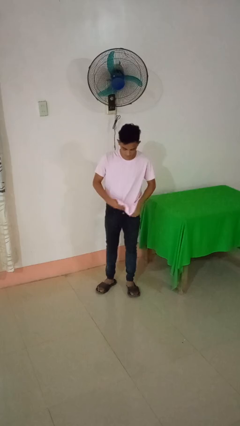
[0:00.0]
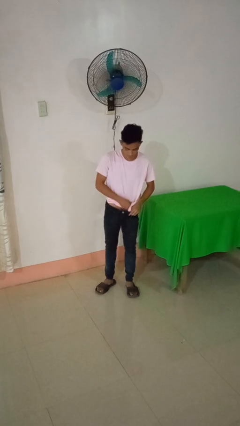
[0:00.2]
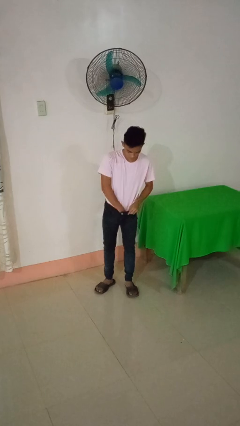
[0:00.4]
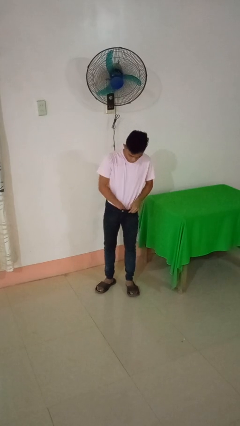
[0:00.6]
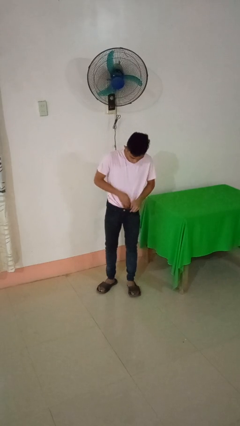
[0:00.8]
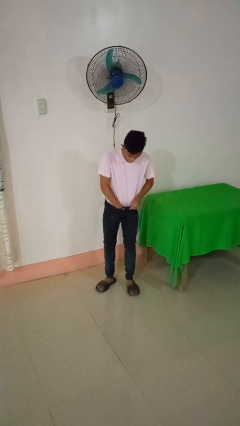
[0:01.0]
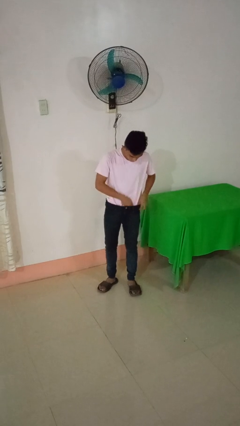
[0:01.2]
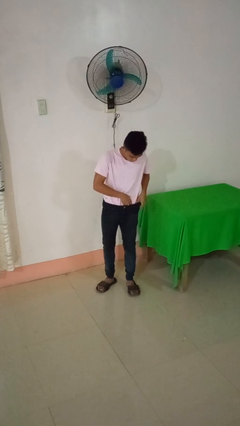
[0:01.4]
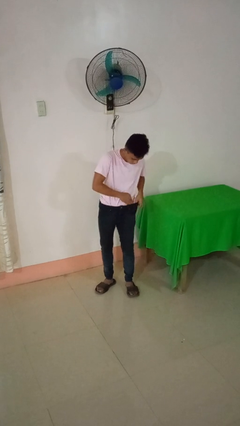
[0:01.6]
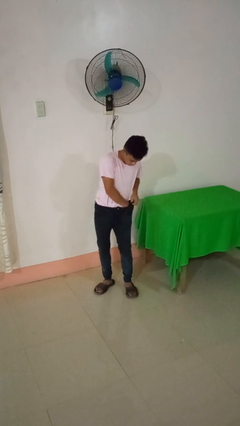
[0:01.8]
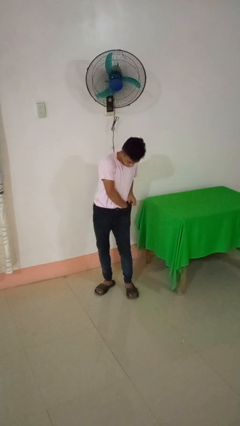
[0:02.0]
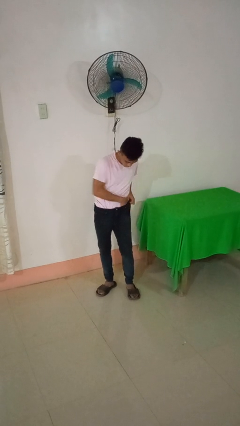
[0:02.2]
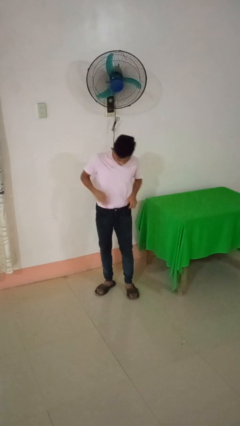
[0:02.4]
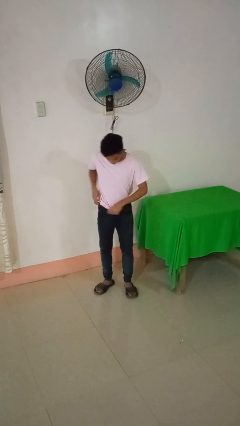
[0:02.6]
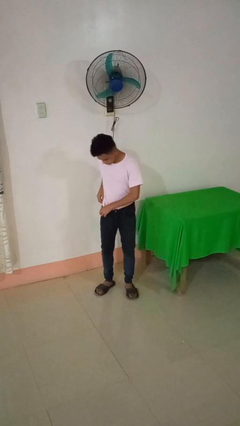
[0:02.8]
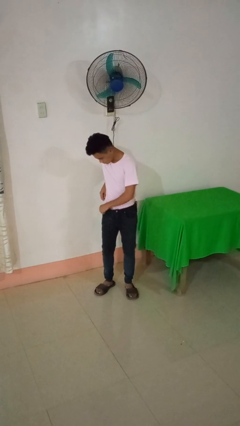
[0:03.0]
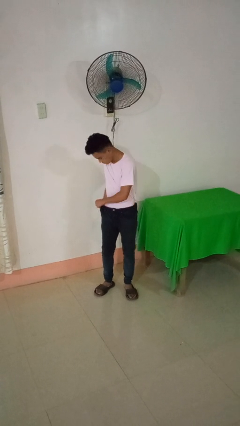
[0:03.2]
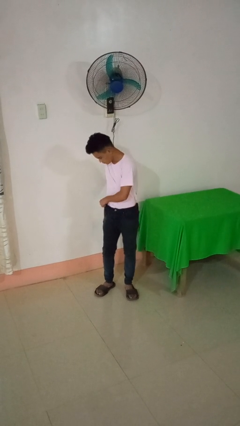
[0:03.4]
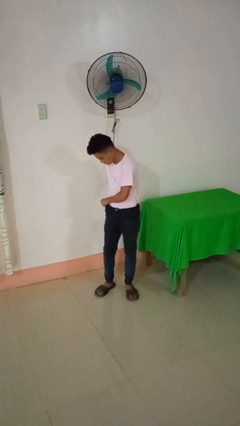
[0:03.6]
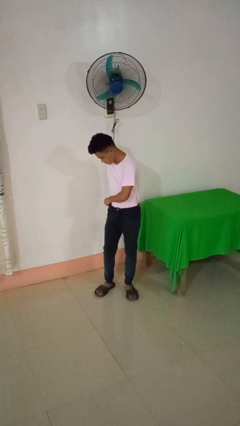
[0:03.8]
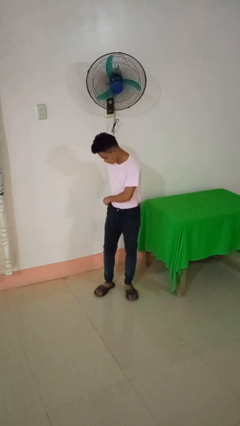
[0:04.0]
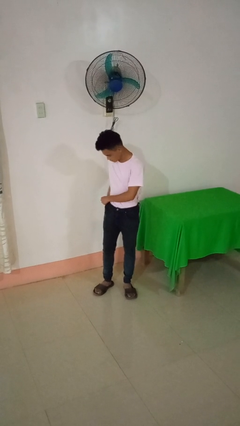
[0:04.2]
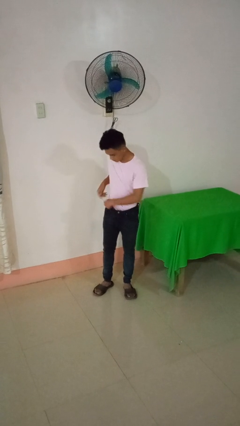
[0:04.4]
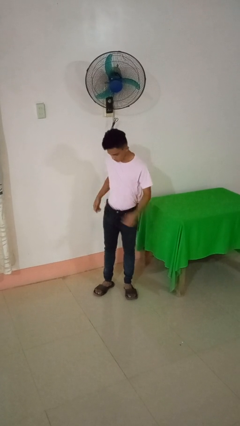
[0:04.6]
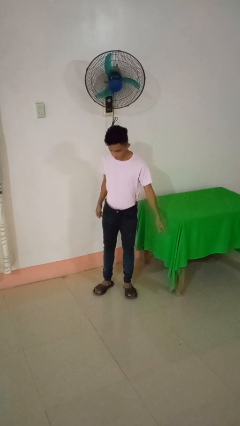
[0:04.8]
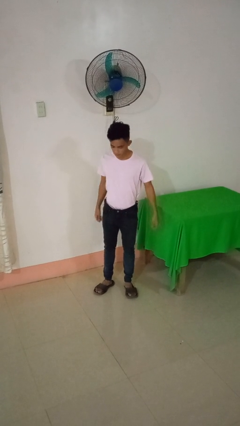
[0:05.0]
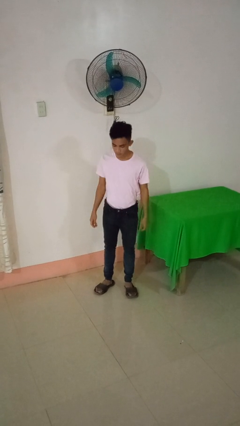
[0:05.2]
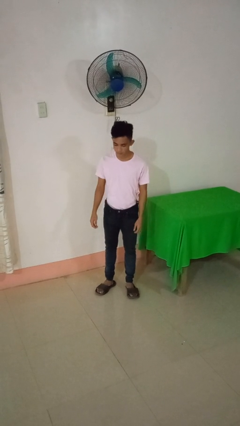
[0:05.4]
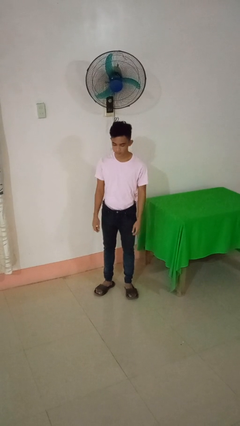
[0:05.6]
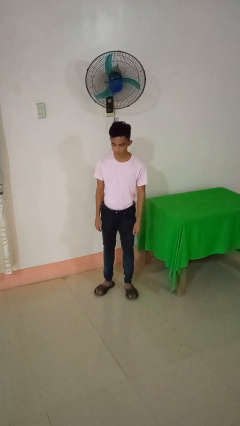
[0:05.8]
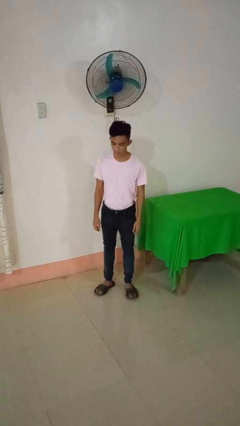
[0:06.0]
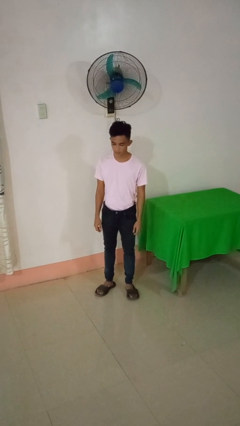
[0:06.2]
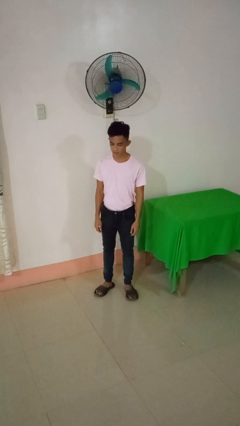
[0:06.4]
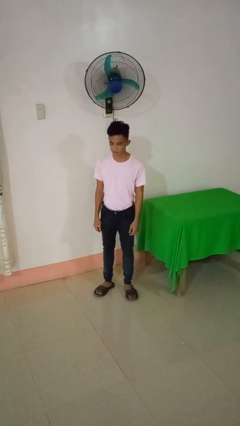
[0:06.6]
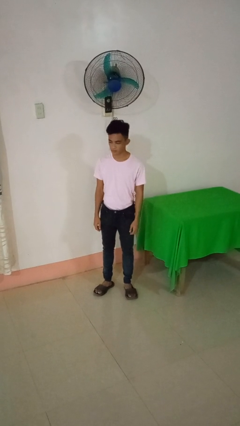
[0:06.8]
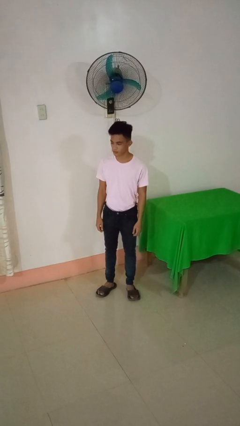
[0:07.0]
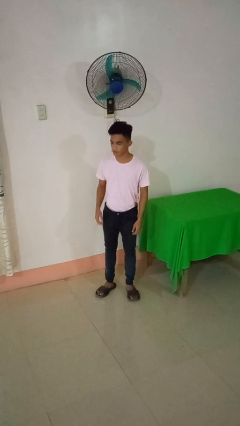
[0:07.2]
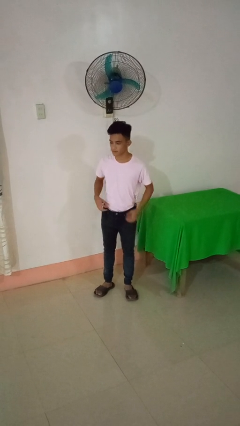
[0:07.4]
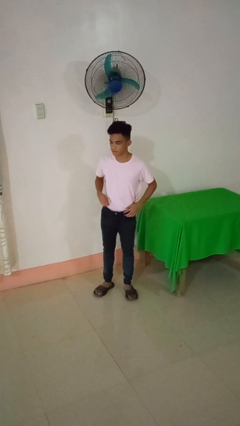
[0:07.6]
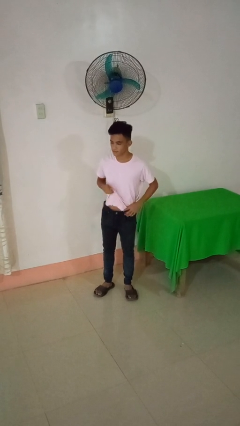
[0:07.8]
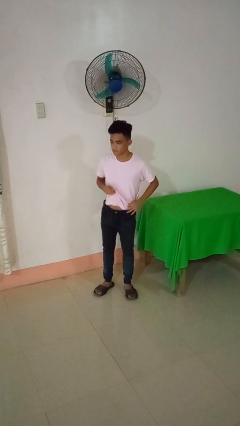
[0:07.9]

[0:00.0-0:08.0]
person tucks in shirt

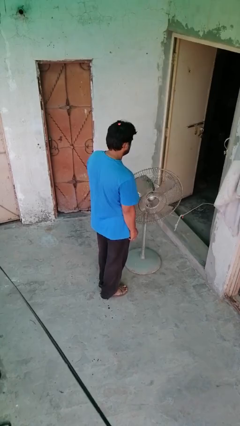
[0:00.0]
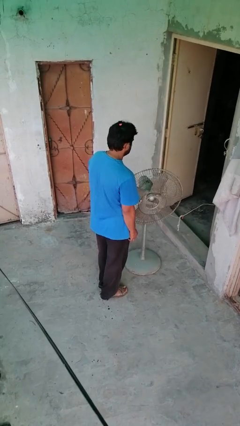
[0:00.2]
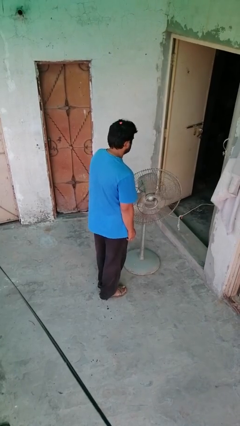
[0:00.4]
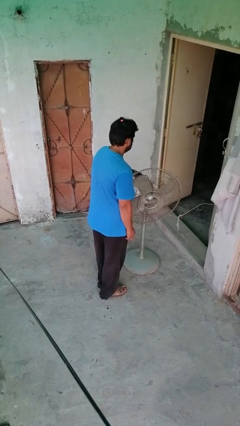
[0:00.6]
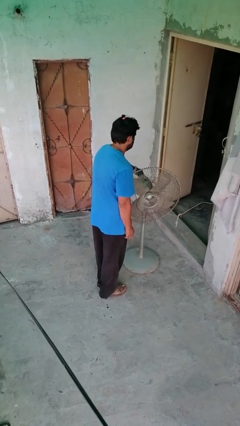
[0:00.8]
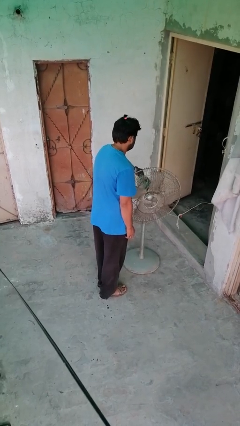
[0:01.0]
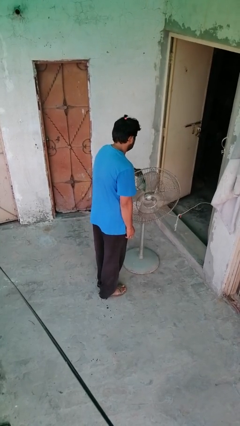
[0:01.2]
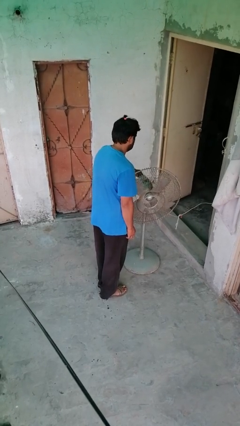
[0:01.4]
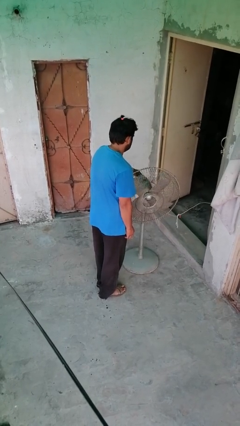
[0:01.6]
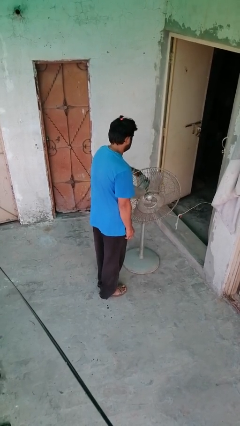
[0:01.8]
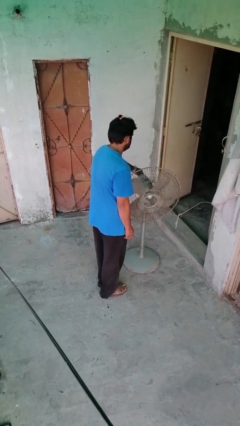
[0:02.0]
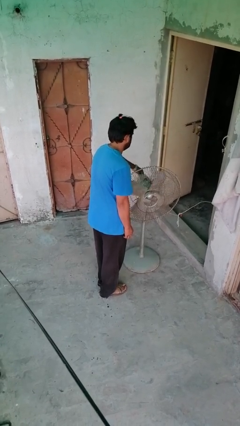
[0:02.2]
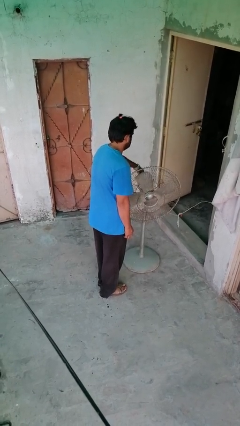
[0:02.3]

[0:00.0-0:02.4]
person turns on fan

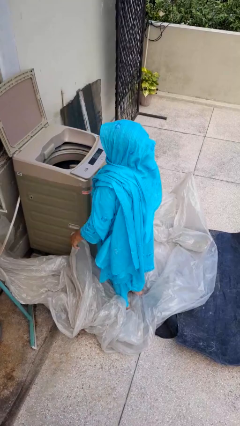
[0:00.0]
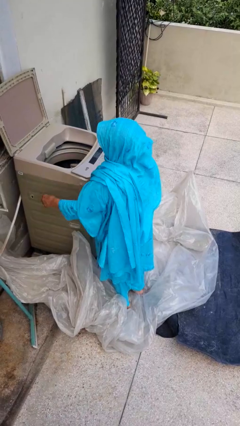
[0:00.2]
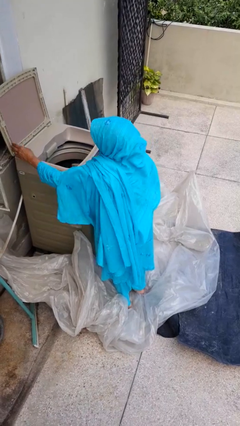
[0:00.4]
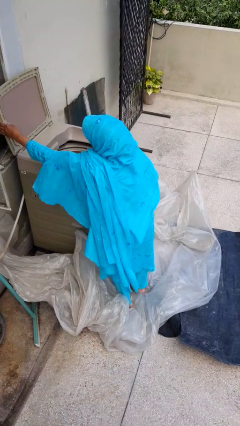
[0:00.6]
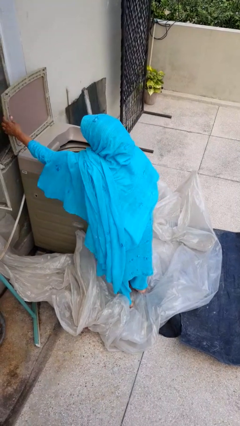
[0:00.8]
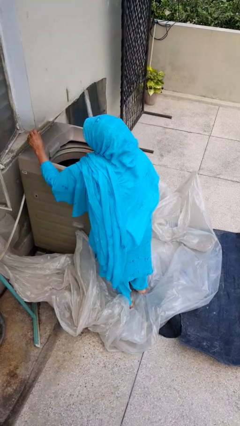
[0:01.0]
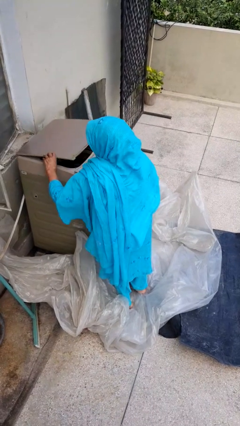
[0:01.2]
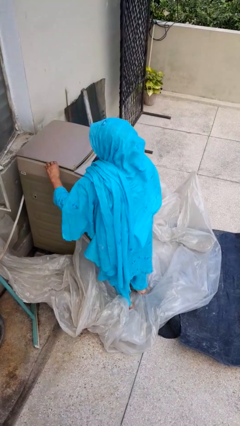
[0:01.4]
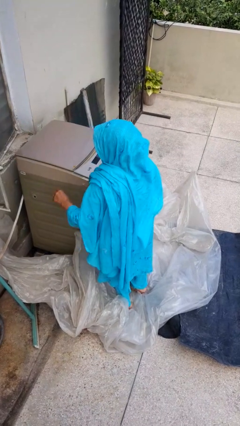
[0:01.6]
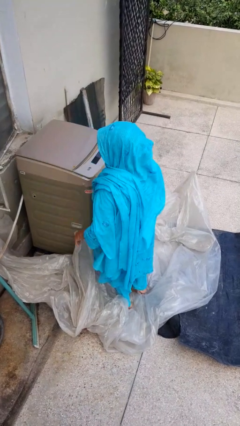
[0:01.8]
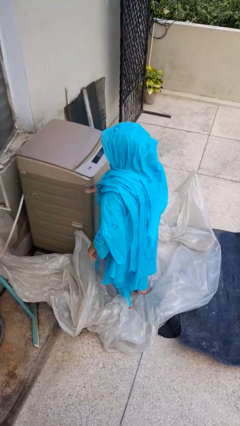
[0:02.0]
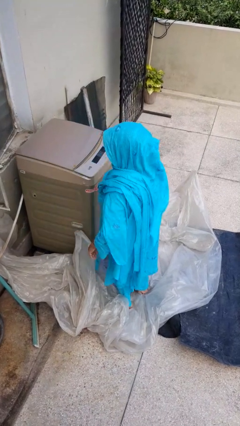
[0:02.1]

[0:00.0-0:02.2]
person closes clothes washer

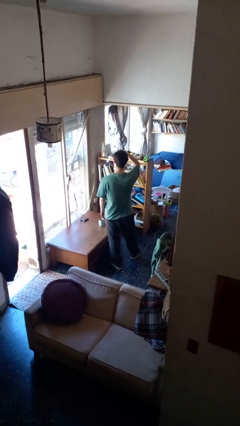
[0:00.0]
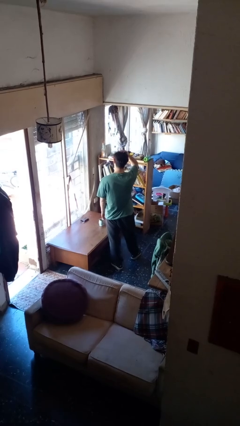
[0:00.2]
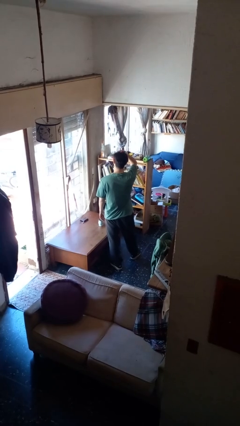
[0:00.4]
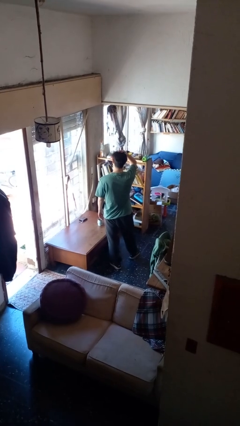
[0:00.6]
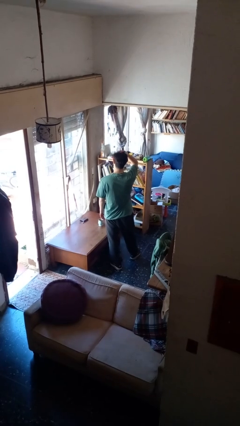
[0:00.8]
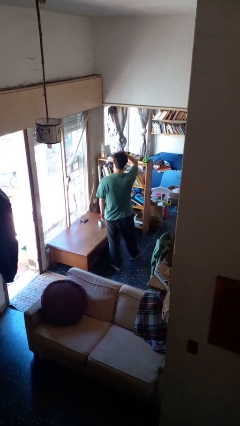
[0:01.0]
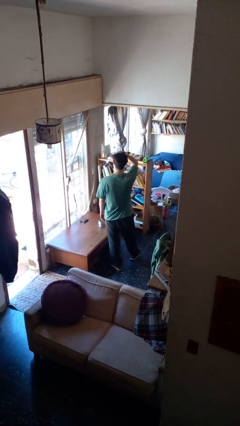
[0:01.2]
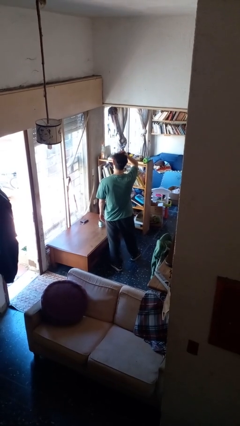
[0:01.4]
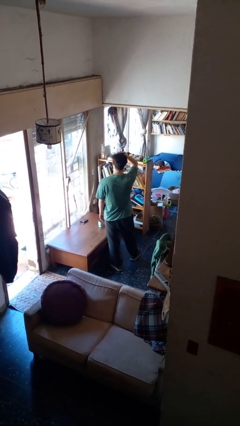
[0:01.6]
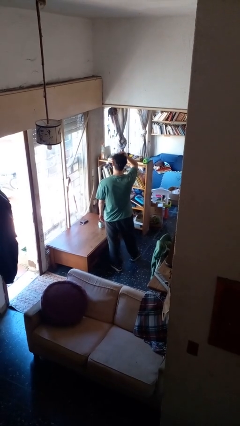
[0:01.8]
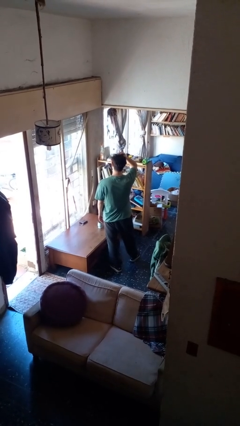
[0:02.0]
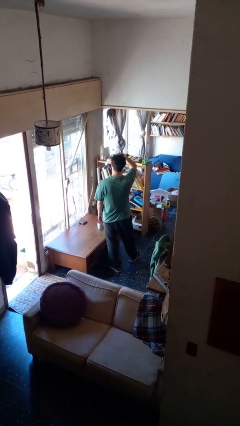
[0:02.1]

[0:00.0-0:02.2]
person pats head

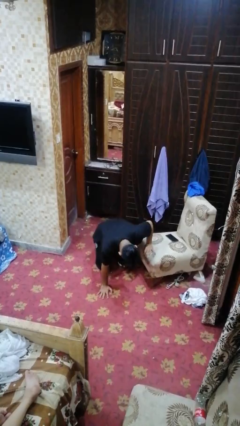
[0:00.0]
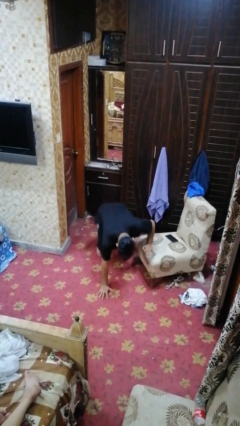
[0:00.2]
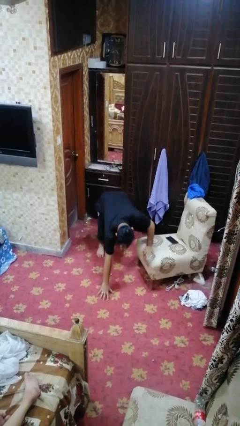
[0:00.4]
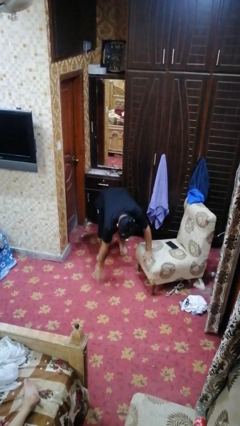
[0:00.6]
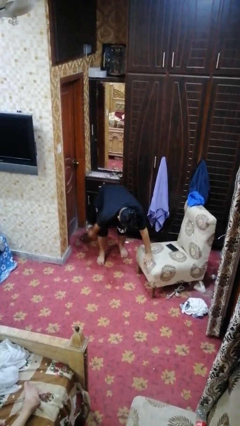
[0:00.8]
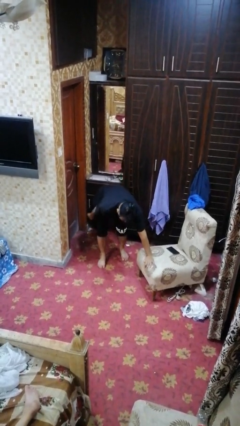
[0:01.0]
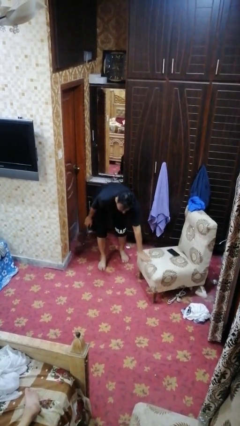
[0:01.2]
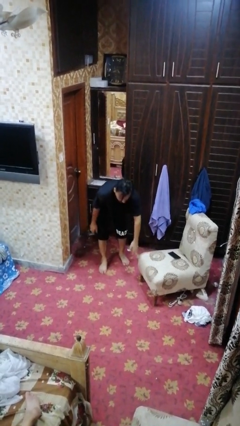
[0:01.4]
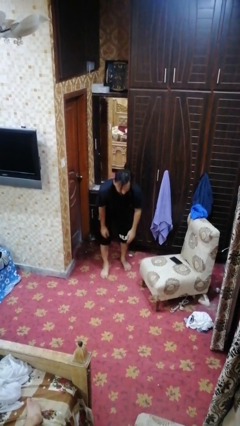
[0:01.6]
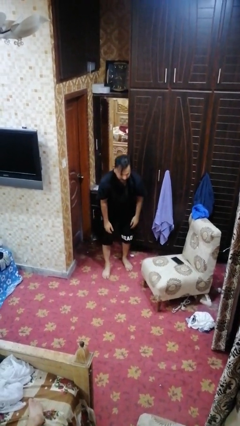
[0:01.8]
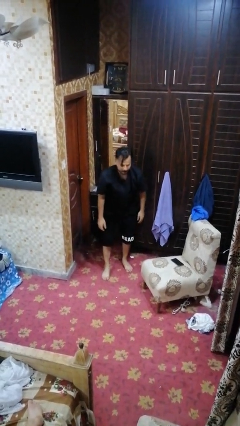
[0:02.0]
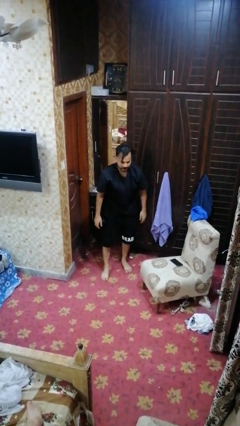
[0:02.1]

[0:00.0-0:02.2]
person stands up from floor

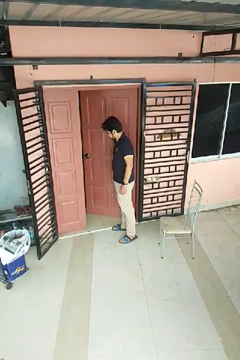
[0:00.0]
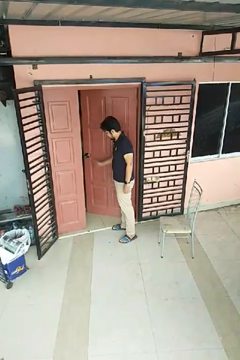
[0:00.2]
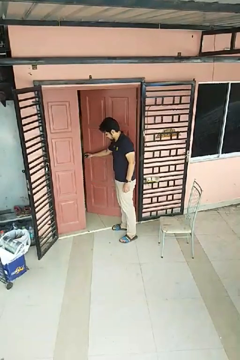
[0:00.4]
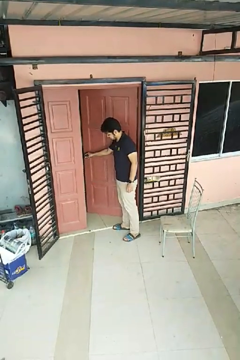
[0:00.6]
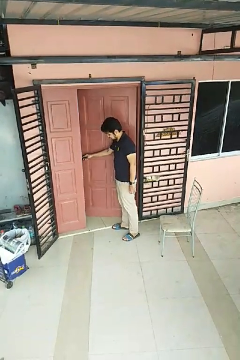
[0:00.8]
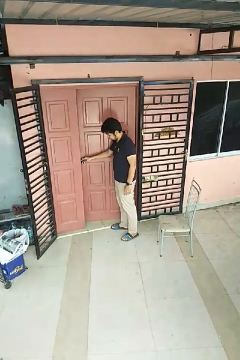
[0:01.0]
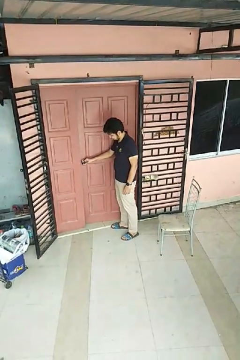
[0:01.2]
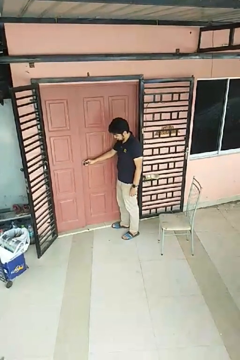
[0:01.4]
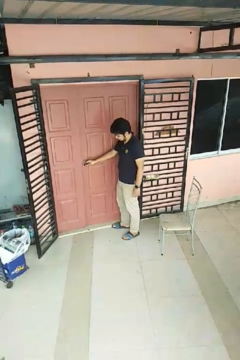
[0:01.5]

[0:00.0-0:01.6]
person closes door with foot
